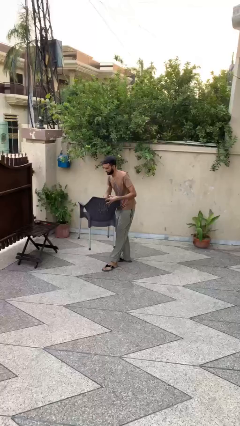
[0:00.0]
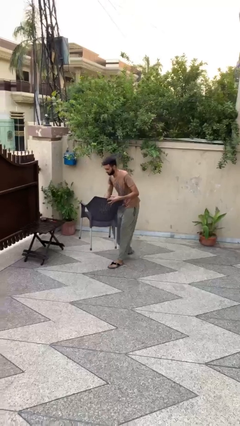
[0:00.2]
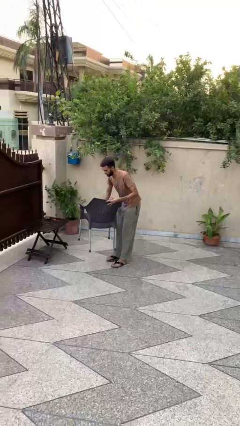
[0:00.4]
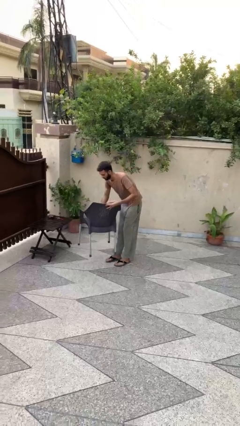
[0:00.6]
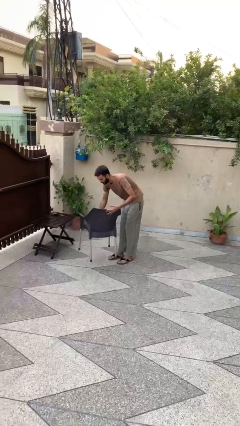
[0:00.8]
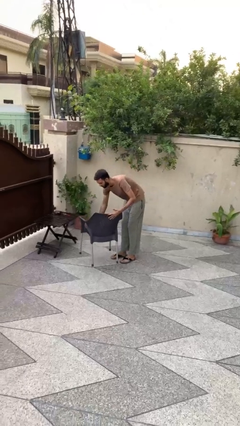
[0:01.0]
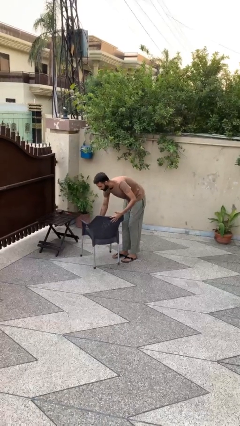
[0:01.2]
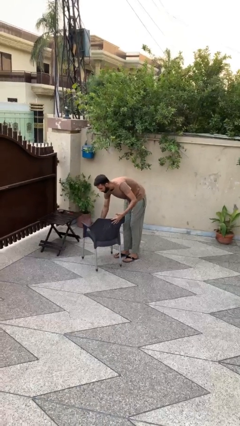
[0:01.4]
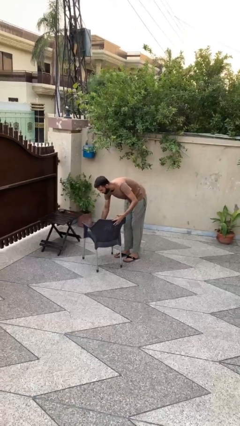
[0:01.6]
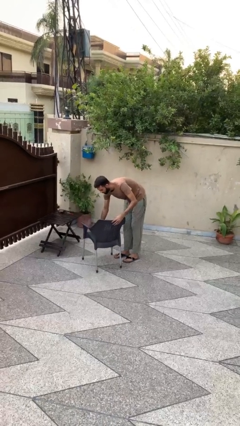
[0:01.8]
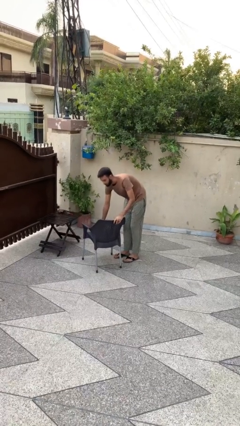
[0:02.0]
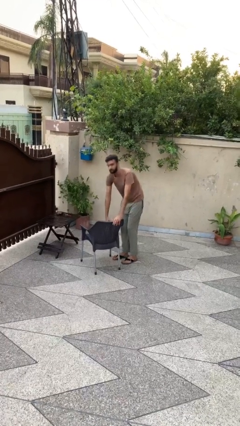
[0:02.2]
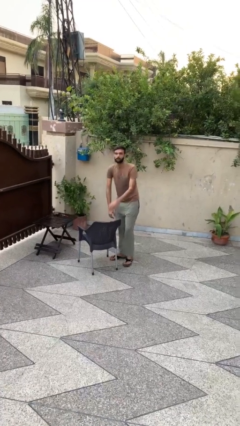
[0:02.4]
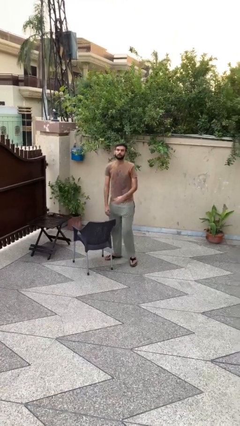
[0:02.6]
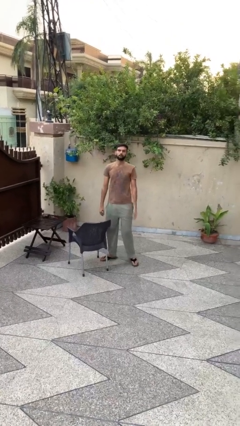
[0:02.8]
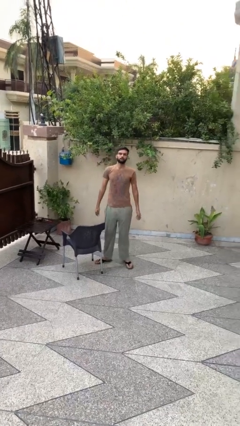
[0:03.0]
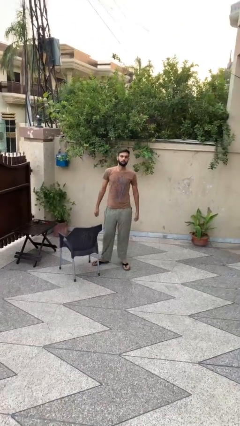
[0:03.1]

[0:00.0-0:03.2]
person puts down object on floor

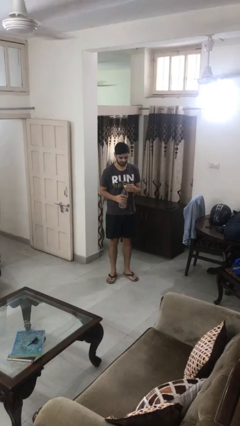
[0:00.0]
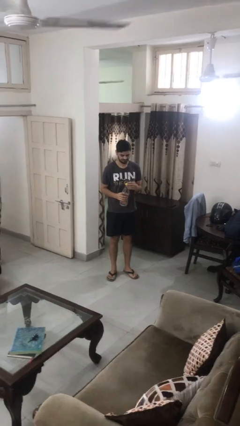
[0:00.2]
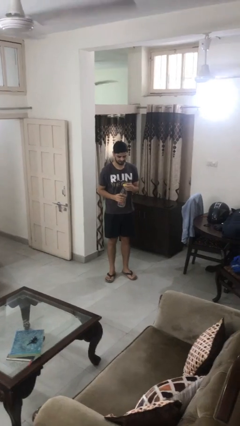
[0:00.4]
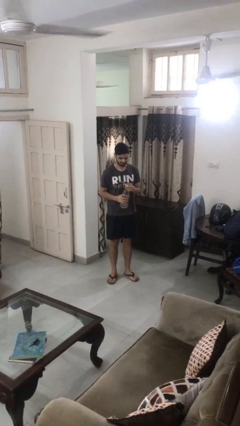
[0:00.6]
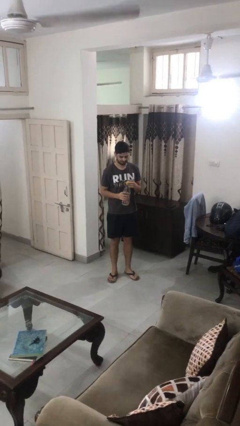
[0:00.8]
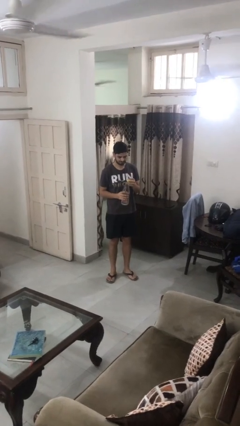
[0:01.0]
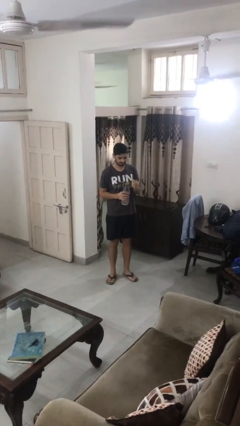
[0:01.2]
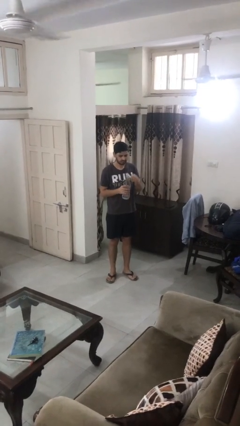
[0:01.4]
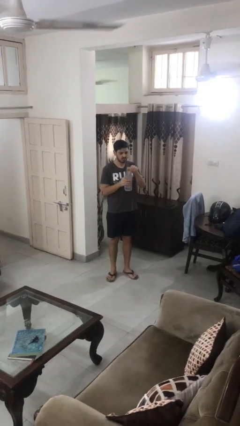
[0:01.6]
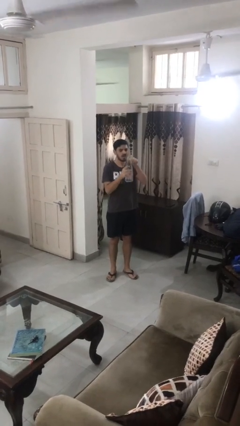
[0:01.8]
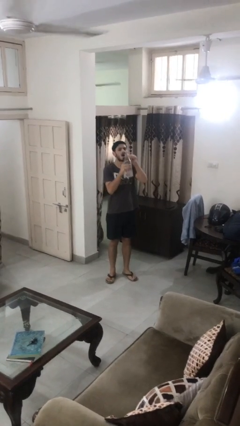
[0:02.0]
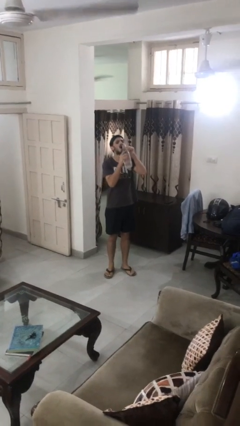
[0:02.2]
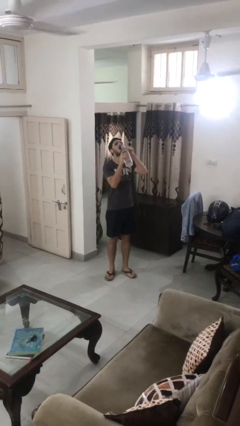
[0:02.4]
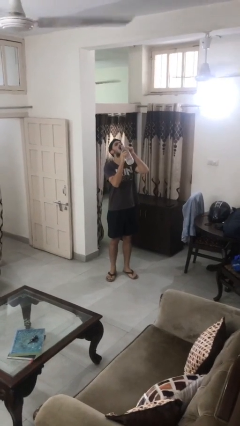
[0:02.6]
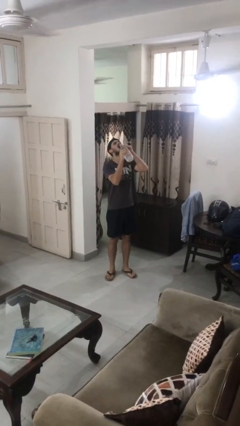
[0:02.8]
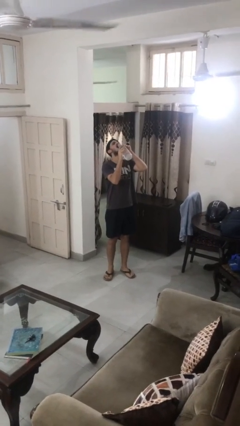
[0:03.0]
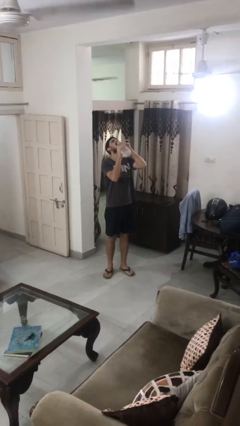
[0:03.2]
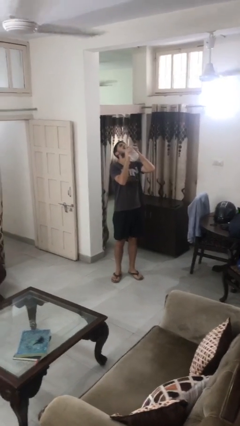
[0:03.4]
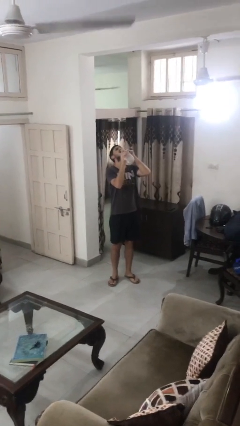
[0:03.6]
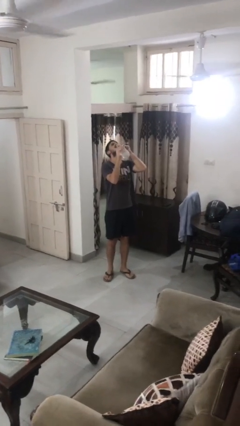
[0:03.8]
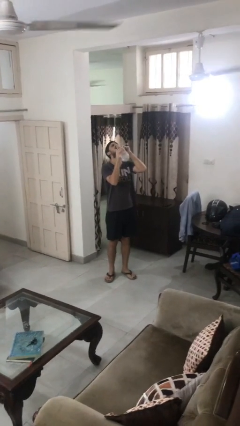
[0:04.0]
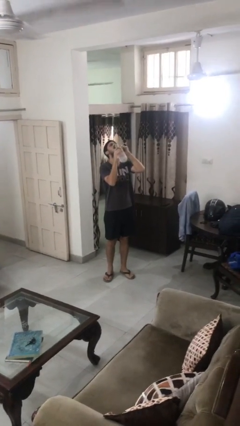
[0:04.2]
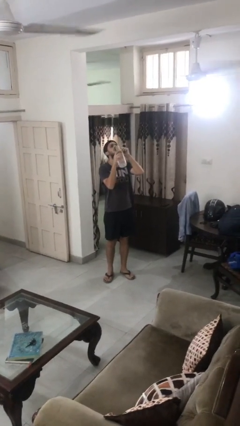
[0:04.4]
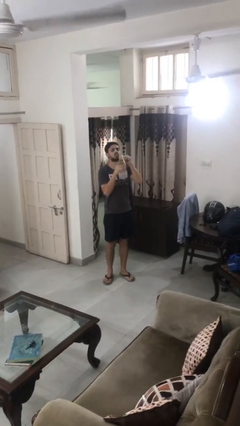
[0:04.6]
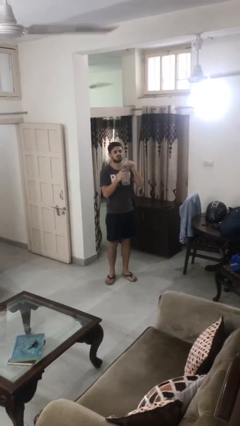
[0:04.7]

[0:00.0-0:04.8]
person drinks from bottle

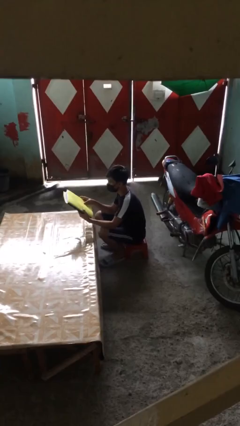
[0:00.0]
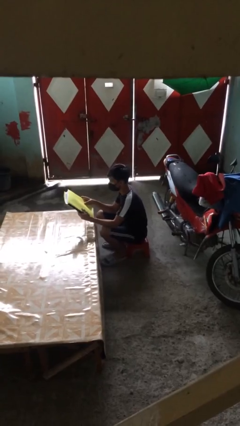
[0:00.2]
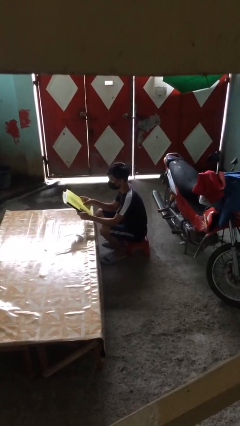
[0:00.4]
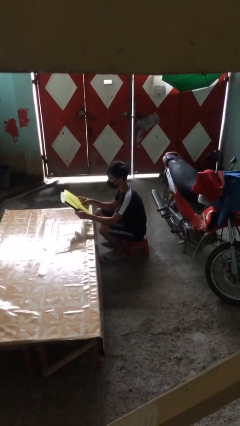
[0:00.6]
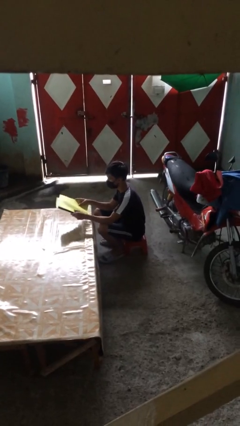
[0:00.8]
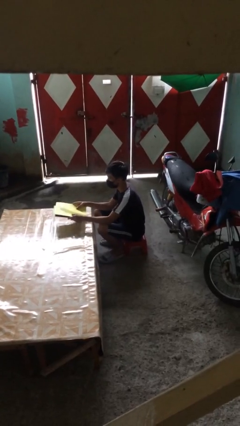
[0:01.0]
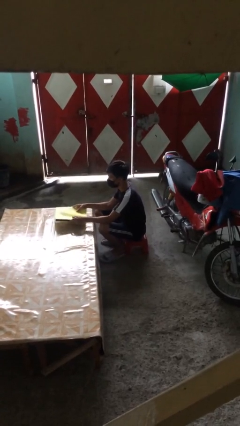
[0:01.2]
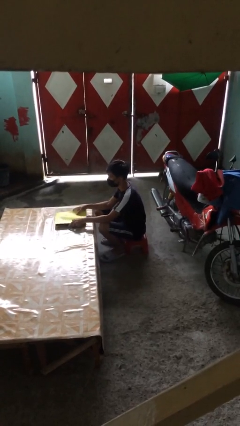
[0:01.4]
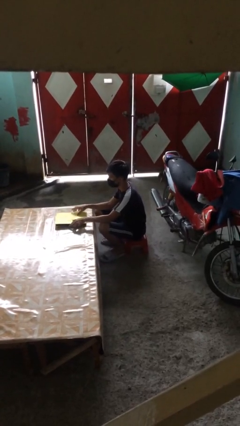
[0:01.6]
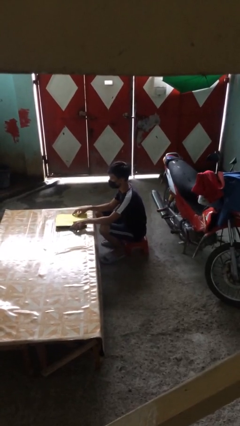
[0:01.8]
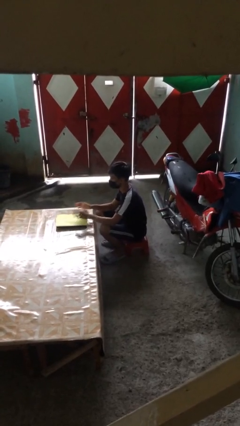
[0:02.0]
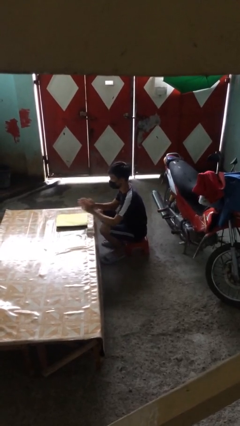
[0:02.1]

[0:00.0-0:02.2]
person puts down object on table

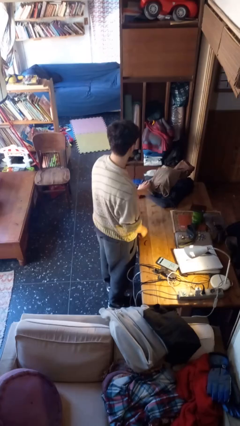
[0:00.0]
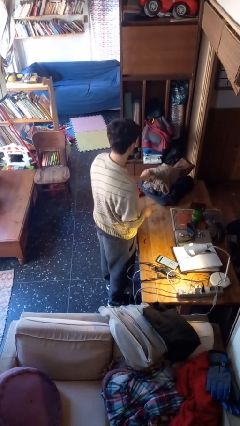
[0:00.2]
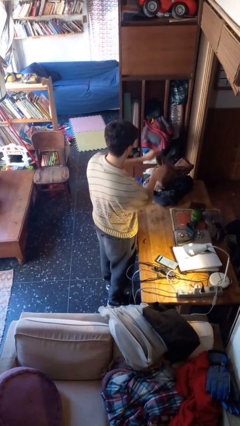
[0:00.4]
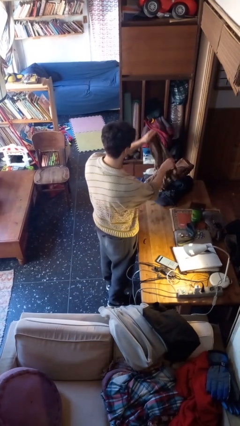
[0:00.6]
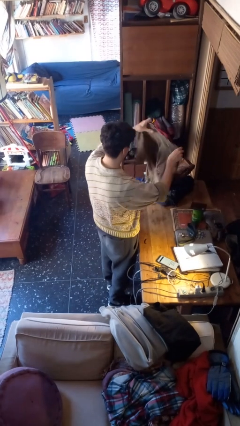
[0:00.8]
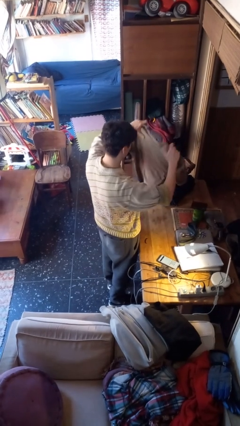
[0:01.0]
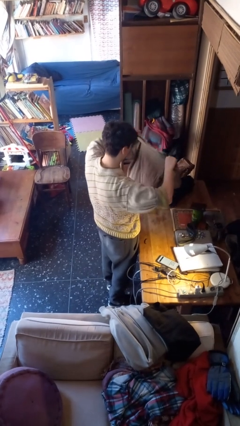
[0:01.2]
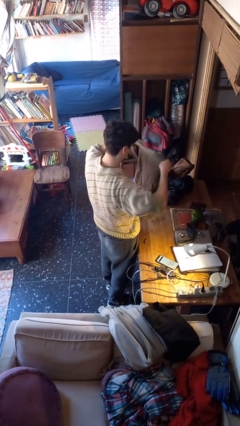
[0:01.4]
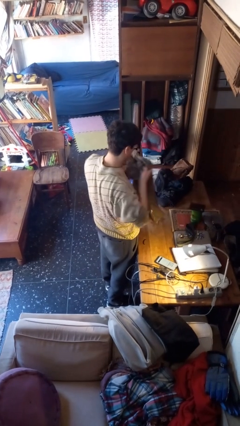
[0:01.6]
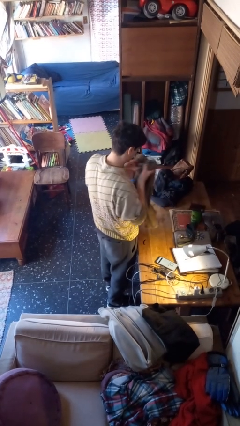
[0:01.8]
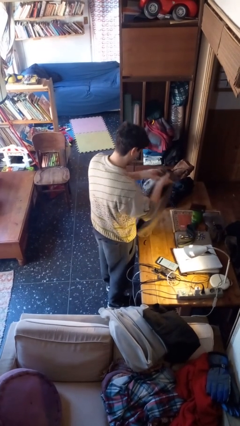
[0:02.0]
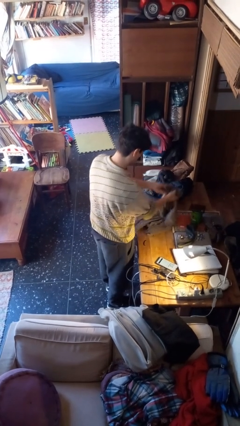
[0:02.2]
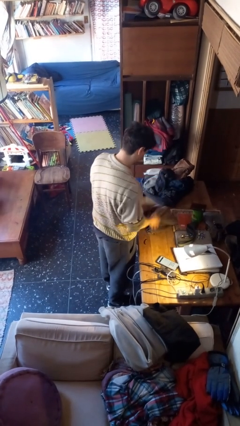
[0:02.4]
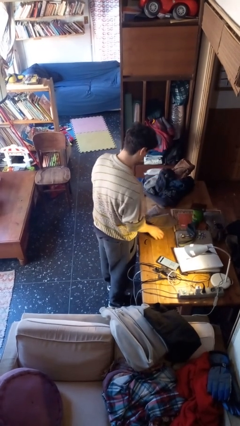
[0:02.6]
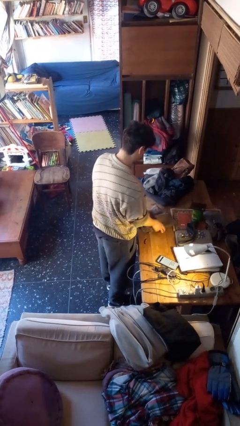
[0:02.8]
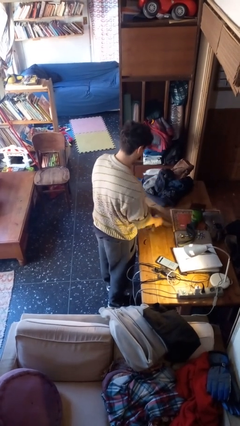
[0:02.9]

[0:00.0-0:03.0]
person folds shirt

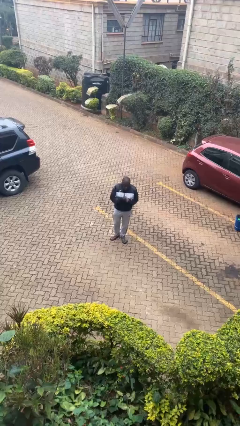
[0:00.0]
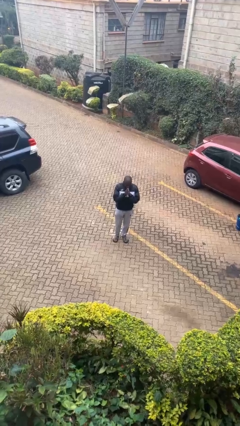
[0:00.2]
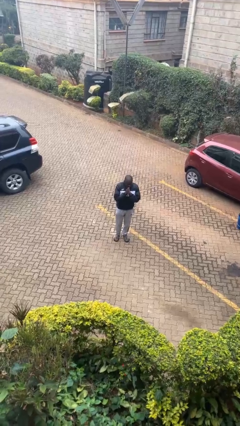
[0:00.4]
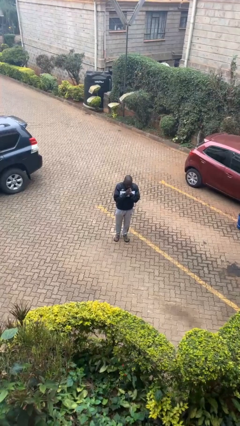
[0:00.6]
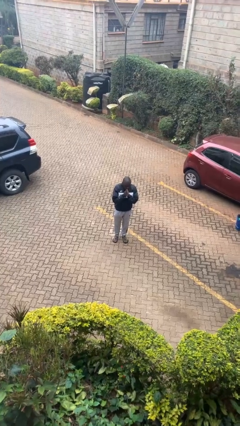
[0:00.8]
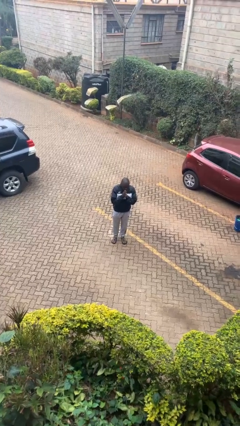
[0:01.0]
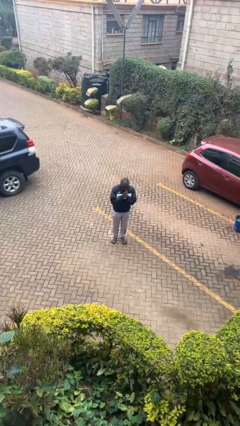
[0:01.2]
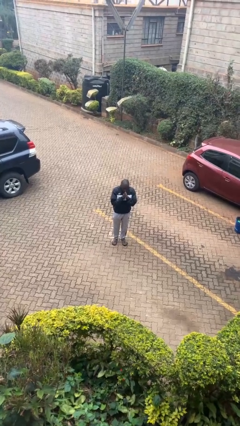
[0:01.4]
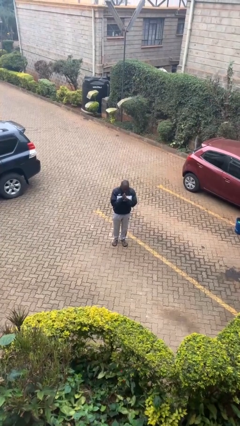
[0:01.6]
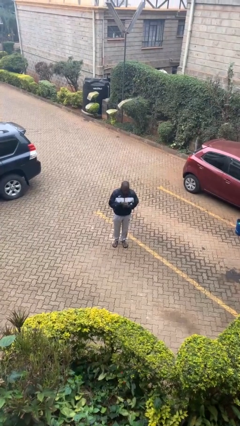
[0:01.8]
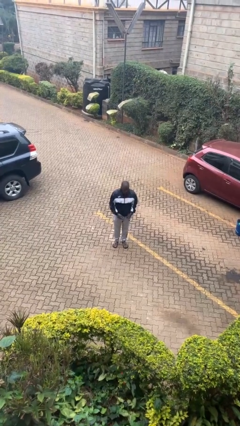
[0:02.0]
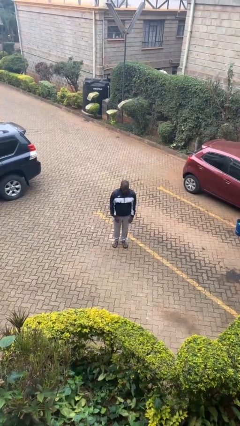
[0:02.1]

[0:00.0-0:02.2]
person blows into hands

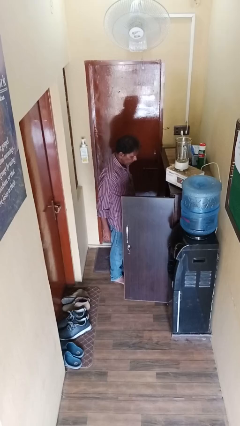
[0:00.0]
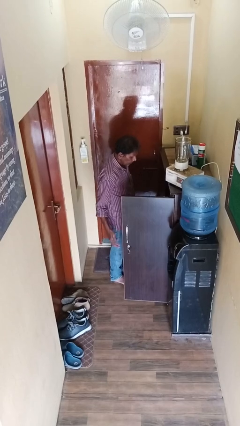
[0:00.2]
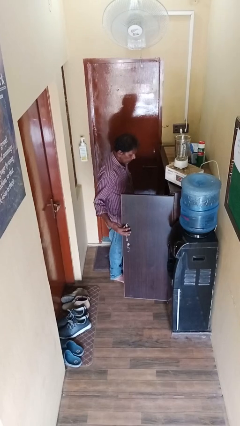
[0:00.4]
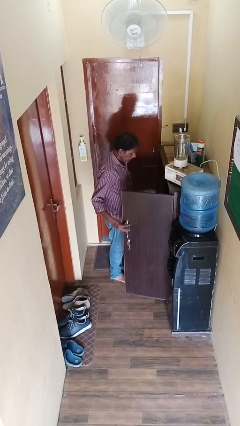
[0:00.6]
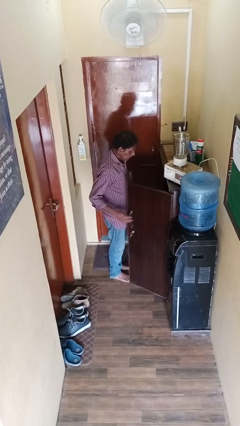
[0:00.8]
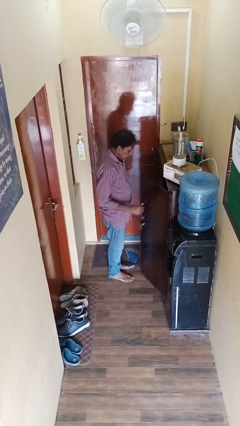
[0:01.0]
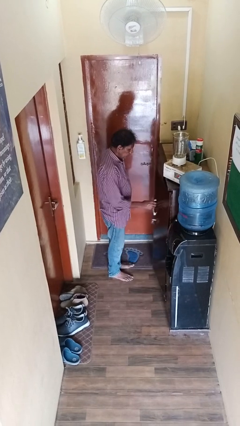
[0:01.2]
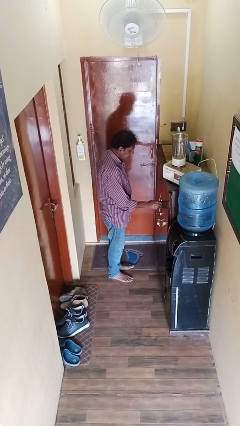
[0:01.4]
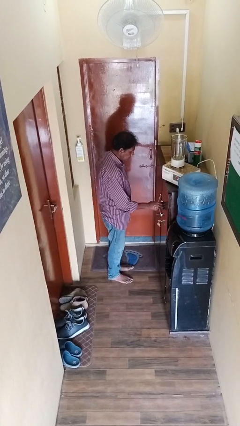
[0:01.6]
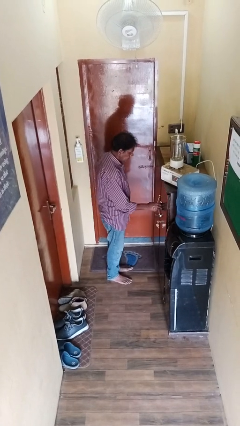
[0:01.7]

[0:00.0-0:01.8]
person closes cabinet

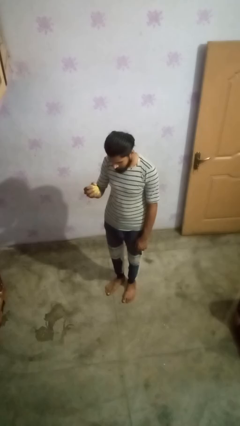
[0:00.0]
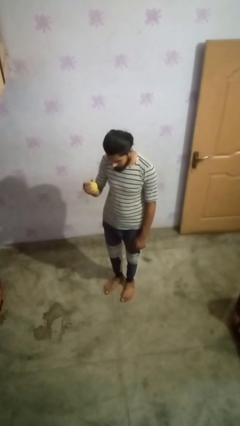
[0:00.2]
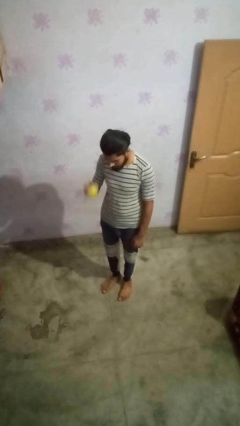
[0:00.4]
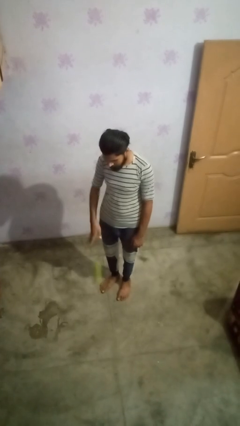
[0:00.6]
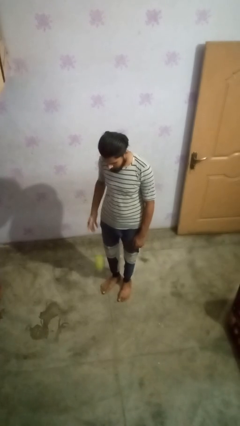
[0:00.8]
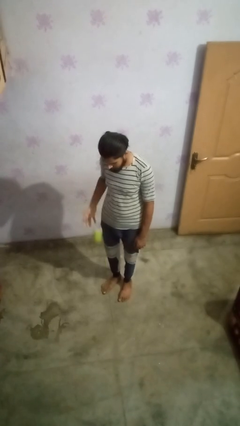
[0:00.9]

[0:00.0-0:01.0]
person bounces ball on floor
